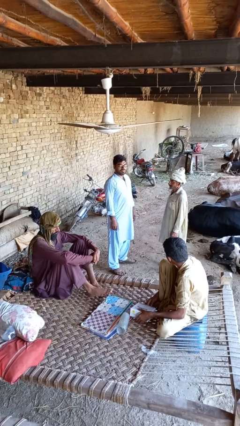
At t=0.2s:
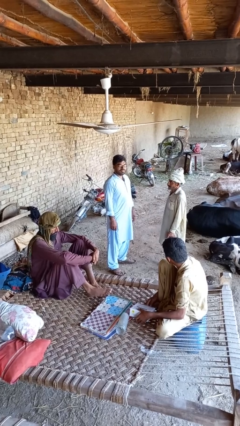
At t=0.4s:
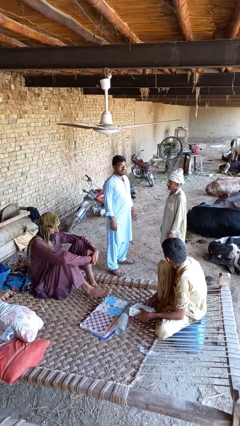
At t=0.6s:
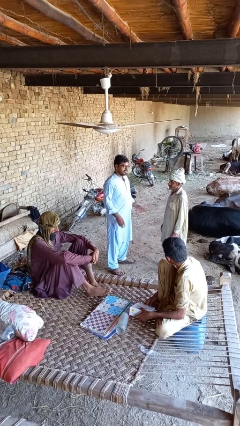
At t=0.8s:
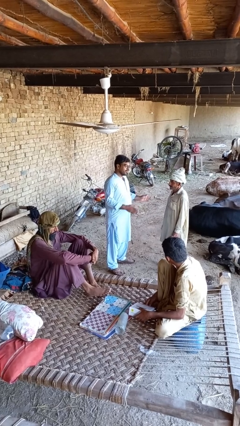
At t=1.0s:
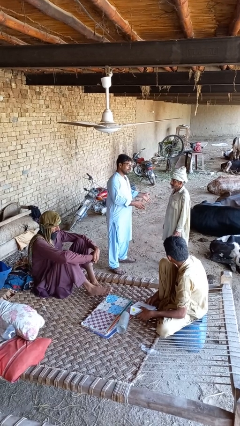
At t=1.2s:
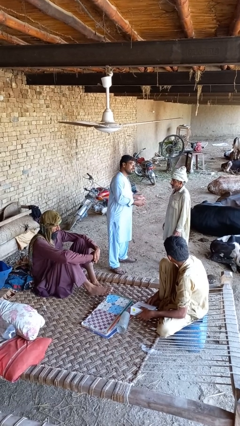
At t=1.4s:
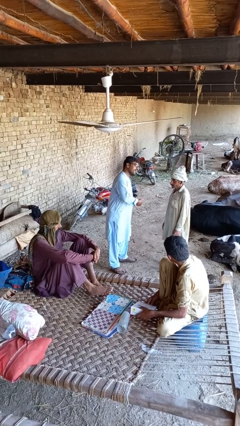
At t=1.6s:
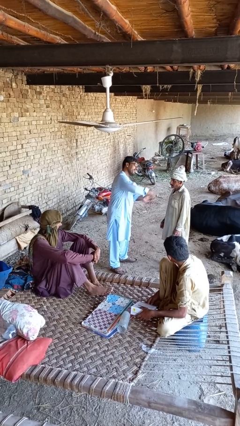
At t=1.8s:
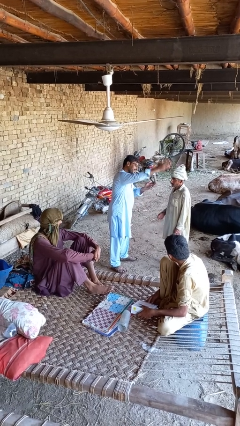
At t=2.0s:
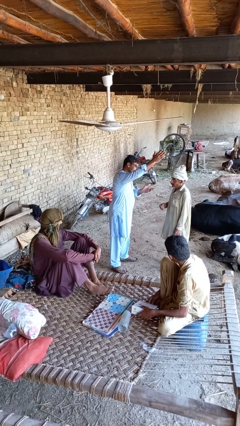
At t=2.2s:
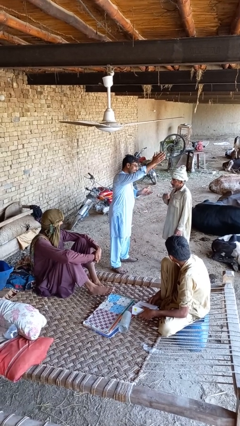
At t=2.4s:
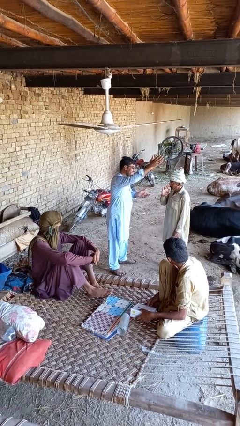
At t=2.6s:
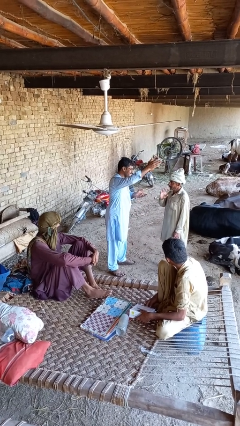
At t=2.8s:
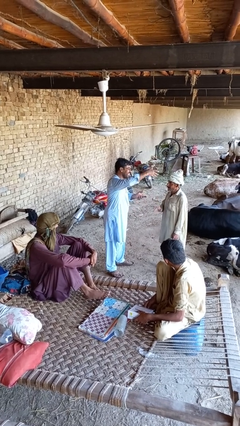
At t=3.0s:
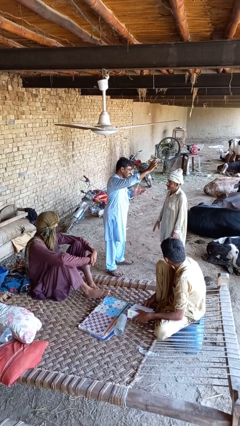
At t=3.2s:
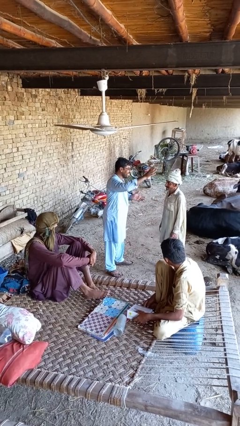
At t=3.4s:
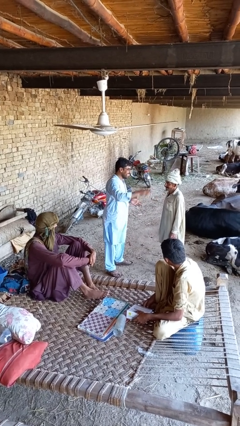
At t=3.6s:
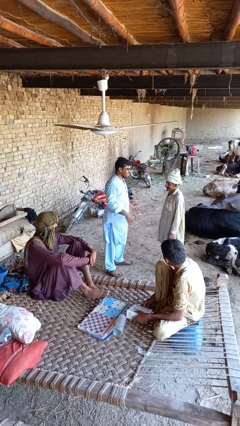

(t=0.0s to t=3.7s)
person shoves person

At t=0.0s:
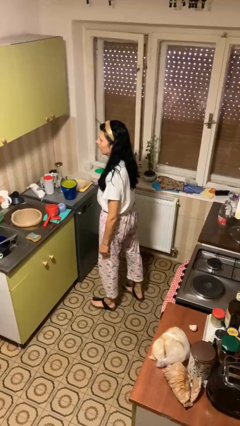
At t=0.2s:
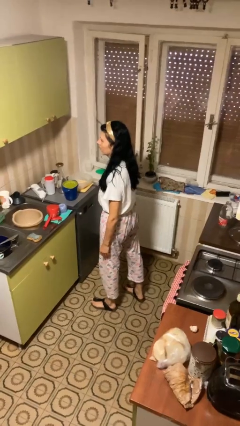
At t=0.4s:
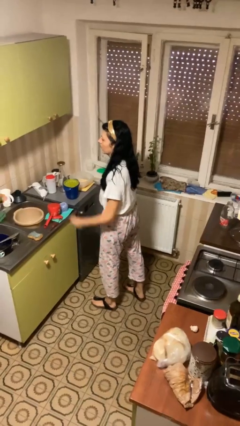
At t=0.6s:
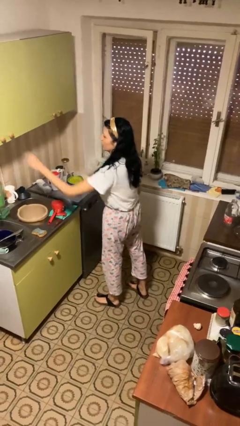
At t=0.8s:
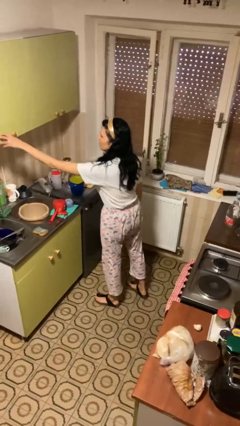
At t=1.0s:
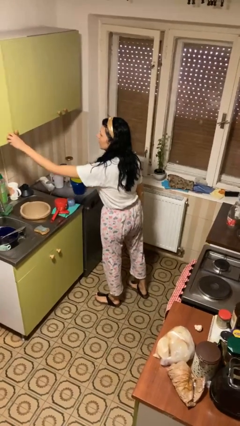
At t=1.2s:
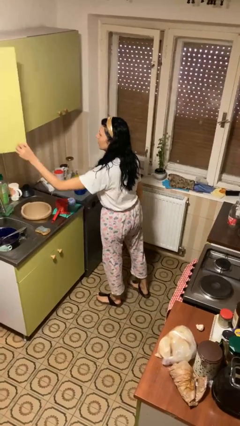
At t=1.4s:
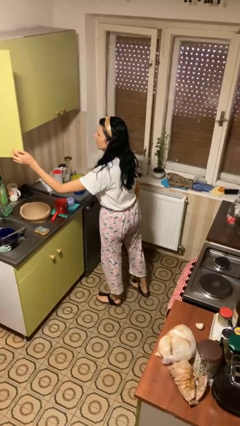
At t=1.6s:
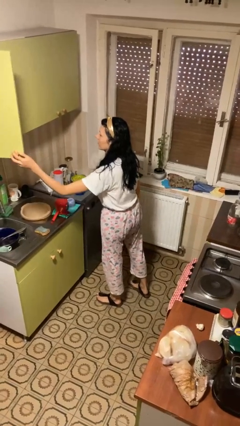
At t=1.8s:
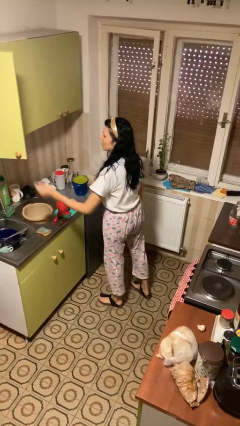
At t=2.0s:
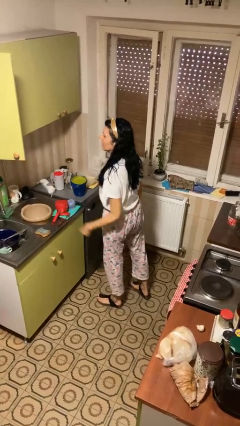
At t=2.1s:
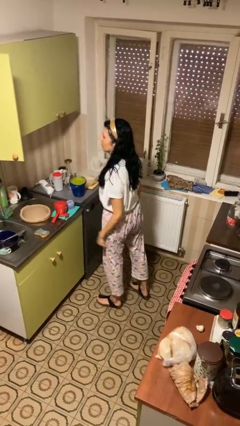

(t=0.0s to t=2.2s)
person opens cabinet

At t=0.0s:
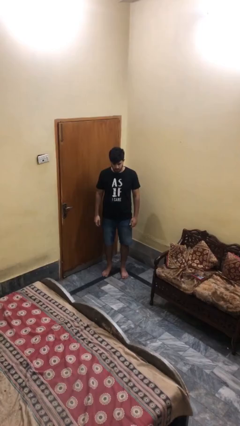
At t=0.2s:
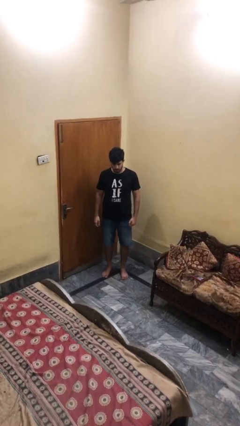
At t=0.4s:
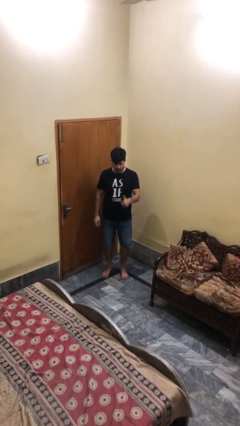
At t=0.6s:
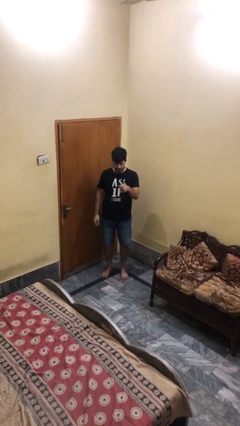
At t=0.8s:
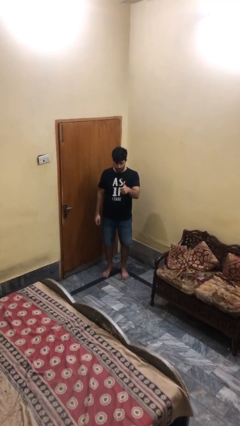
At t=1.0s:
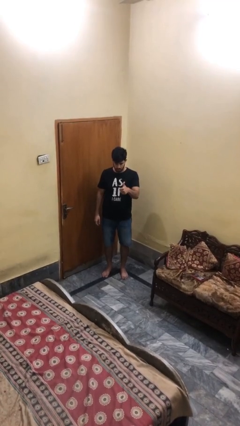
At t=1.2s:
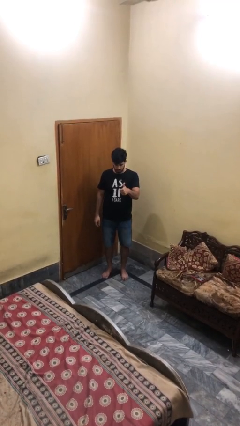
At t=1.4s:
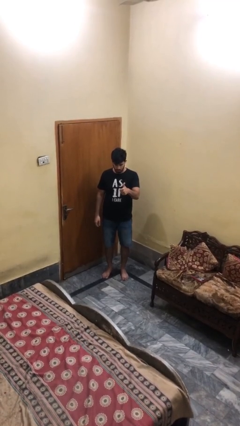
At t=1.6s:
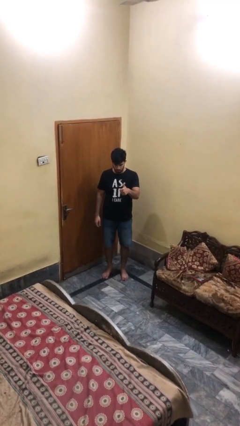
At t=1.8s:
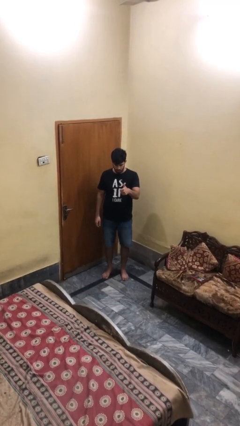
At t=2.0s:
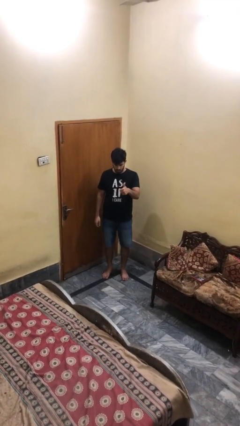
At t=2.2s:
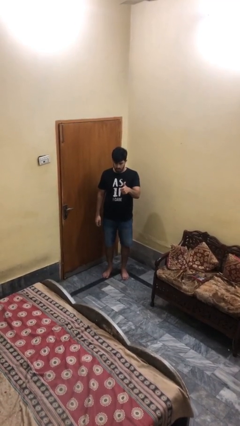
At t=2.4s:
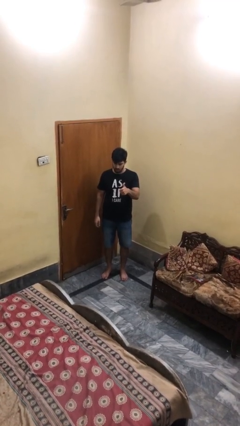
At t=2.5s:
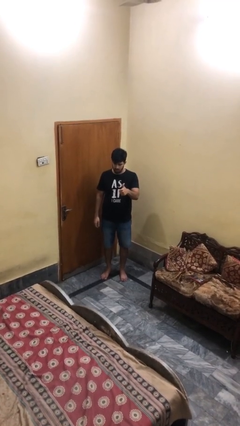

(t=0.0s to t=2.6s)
person gestures thumbs up

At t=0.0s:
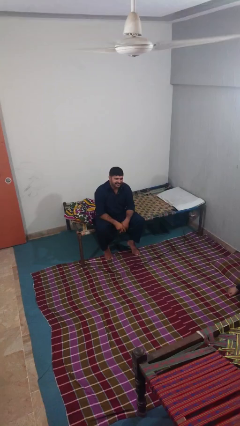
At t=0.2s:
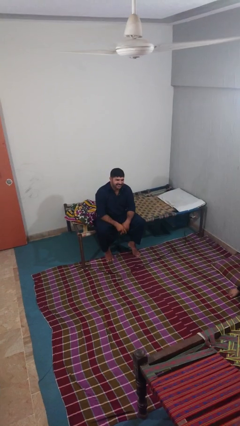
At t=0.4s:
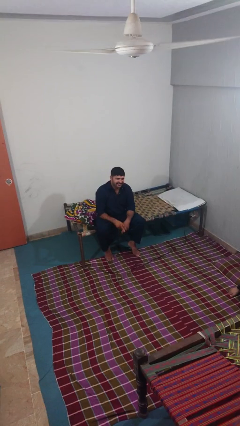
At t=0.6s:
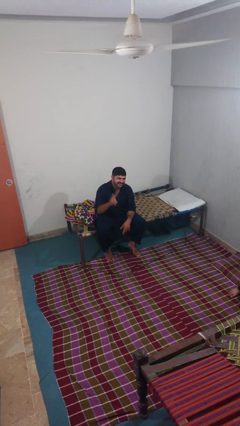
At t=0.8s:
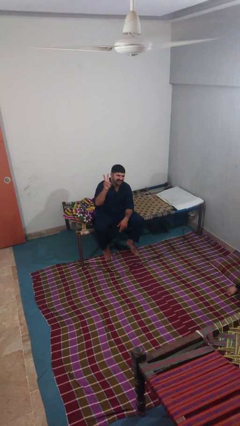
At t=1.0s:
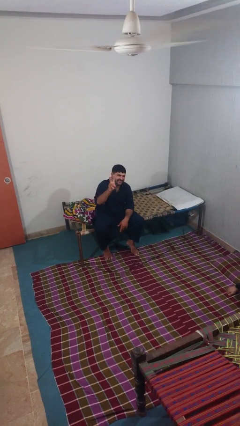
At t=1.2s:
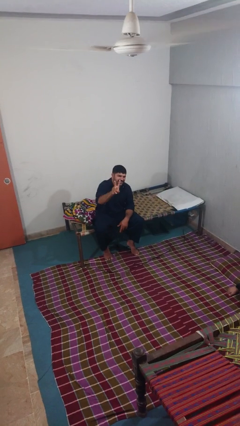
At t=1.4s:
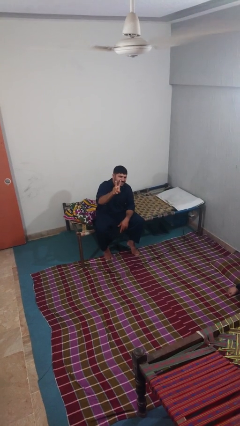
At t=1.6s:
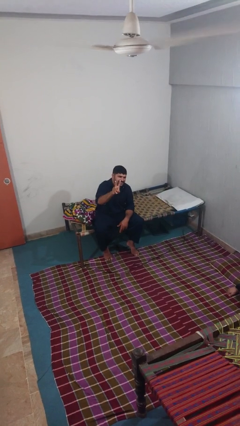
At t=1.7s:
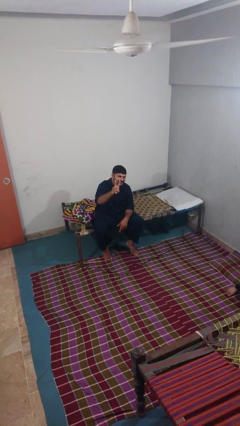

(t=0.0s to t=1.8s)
person gestures peace

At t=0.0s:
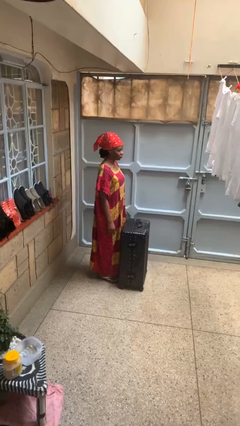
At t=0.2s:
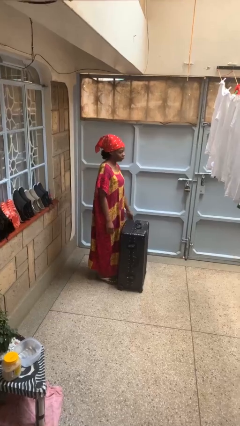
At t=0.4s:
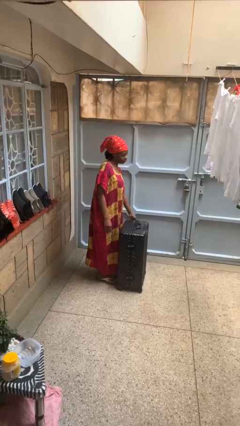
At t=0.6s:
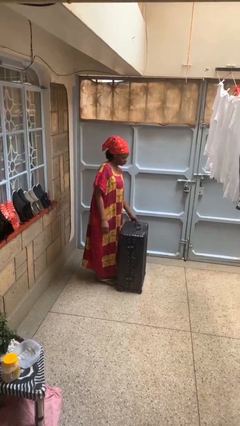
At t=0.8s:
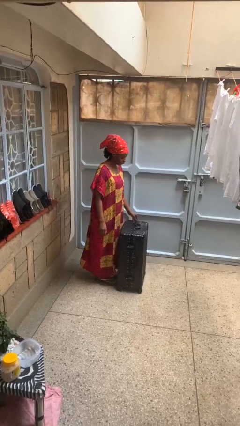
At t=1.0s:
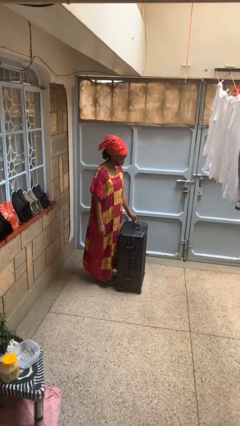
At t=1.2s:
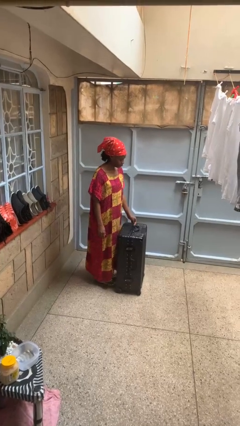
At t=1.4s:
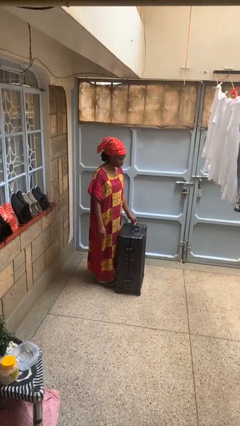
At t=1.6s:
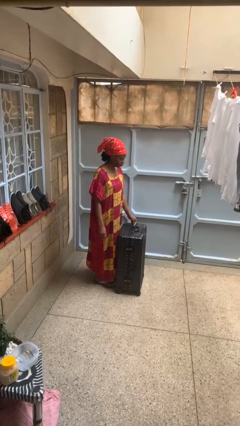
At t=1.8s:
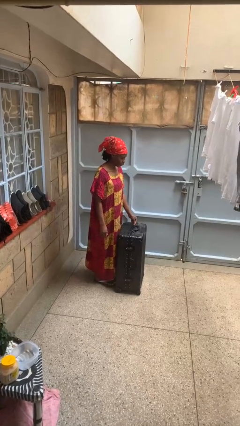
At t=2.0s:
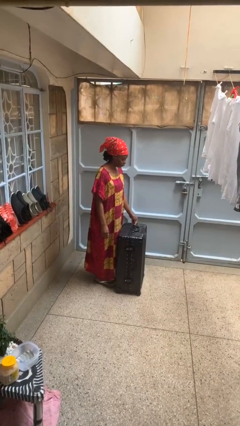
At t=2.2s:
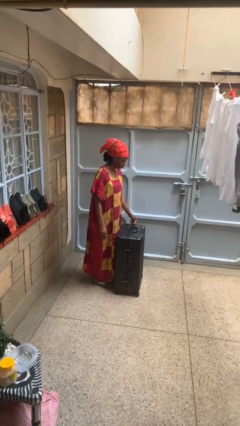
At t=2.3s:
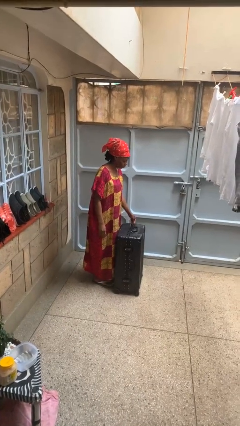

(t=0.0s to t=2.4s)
person opens suitcase

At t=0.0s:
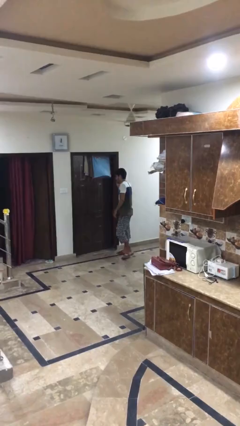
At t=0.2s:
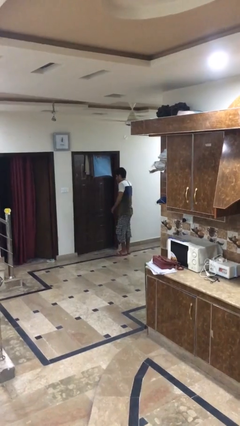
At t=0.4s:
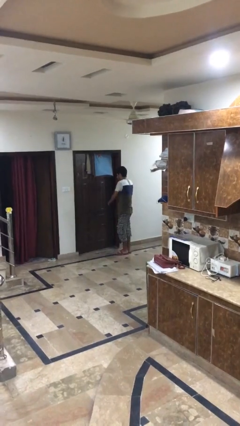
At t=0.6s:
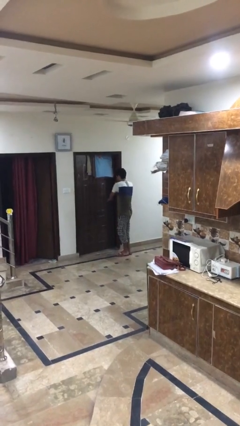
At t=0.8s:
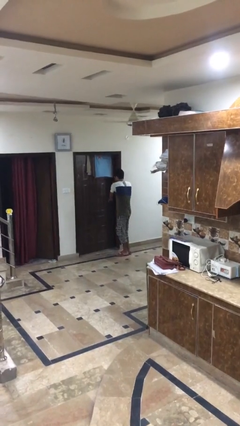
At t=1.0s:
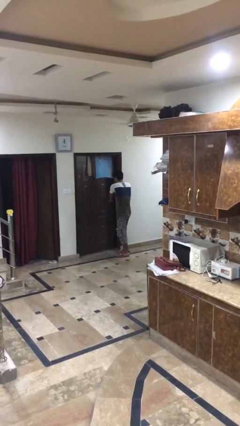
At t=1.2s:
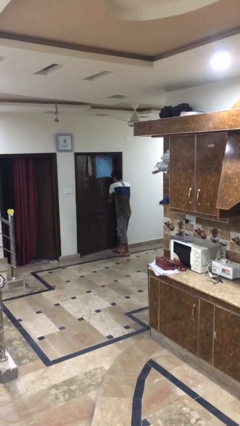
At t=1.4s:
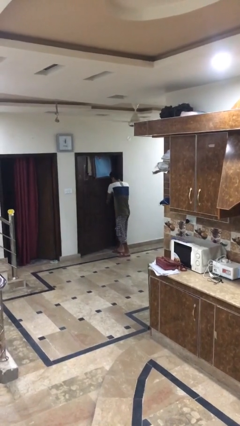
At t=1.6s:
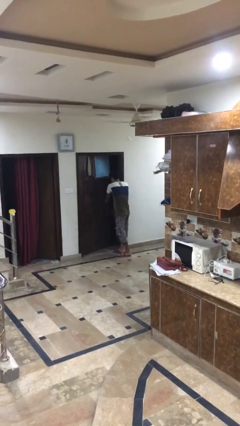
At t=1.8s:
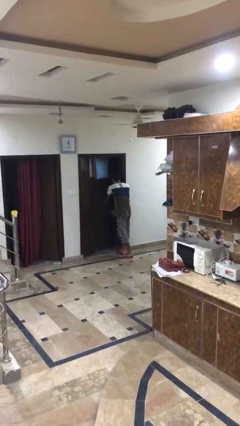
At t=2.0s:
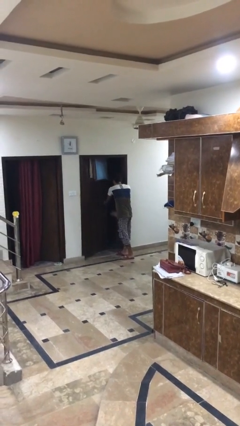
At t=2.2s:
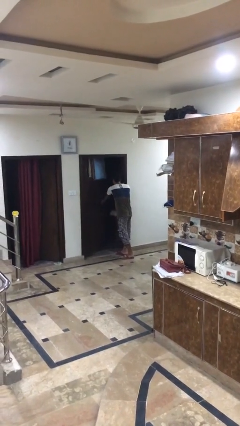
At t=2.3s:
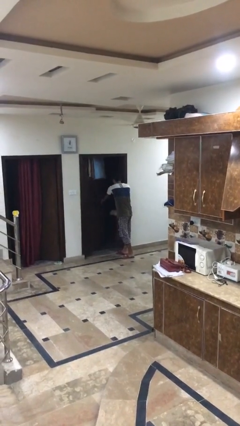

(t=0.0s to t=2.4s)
person opens facility door

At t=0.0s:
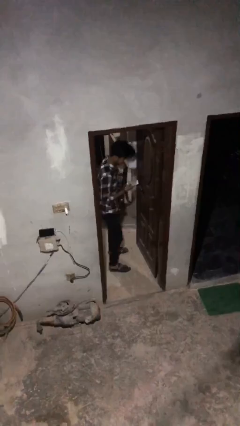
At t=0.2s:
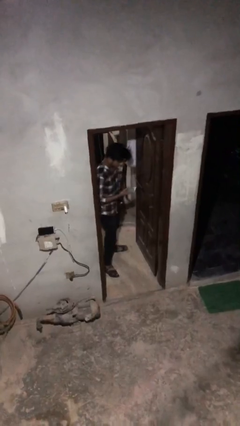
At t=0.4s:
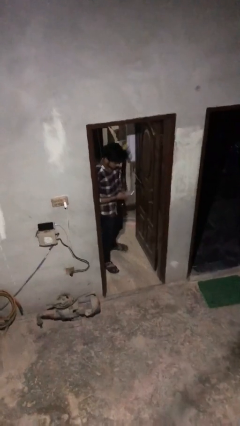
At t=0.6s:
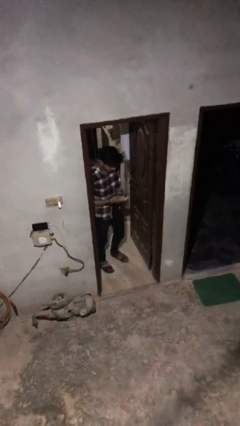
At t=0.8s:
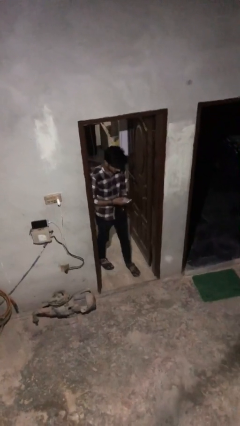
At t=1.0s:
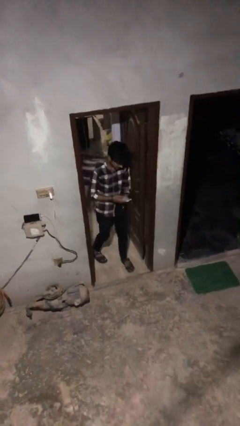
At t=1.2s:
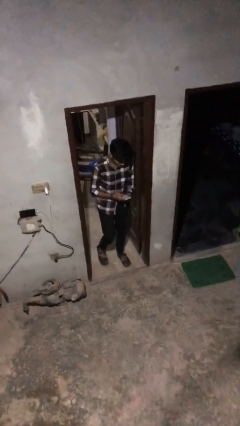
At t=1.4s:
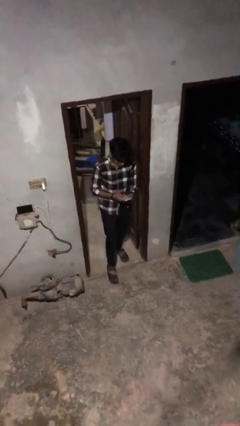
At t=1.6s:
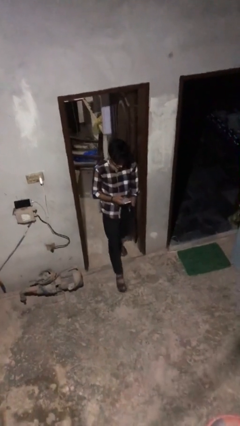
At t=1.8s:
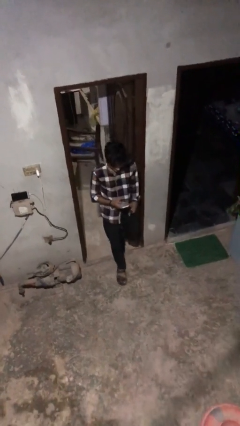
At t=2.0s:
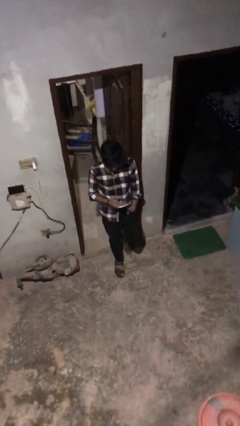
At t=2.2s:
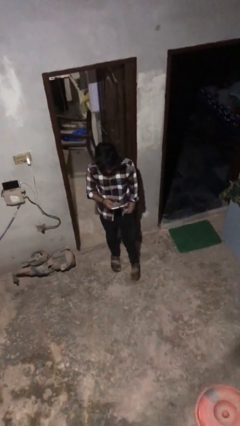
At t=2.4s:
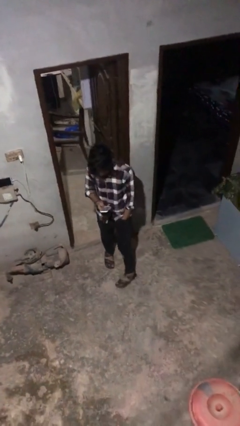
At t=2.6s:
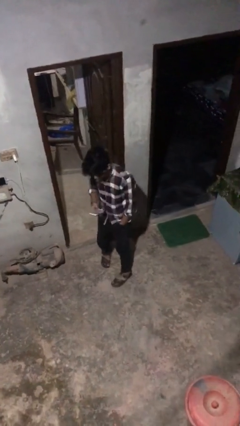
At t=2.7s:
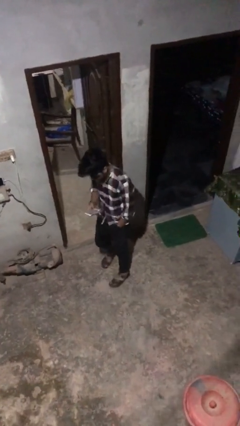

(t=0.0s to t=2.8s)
person enters scene through structure
